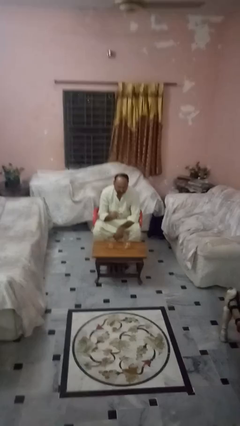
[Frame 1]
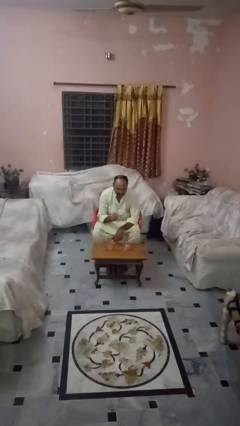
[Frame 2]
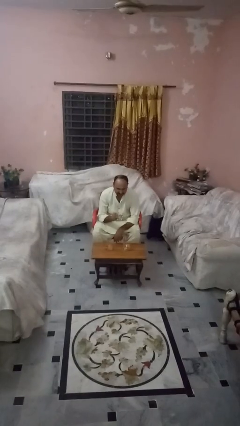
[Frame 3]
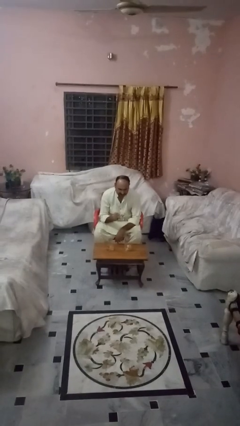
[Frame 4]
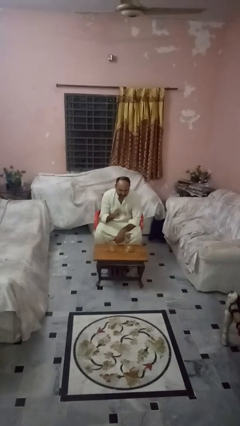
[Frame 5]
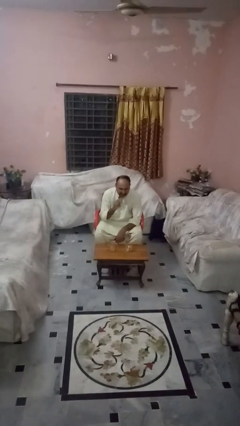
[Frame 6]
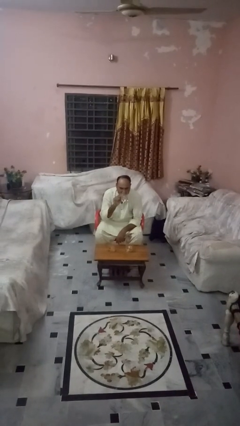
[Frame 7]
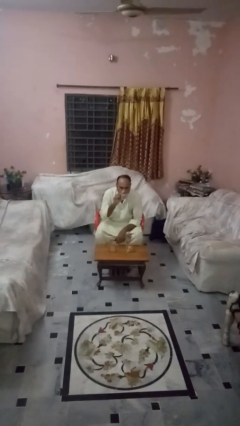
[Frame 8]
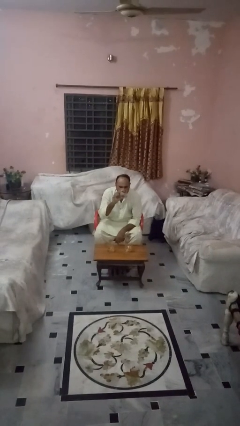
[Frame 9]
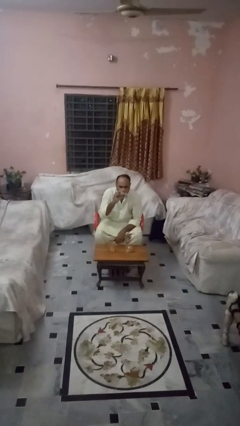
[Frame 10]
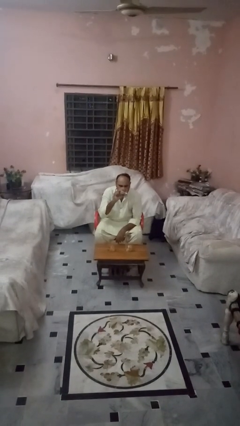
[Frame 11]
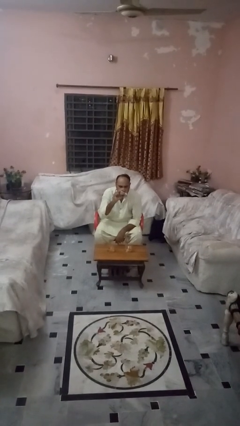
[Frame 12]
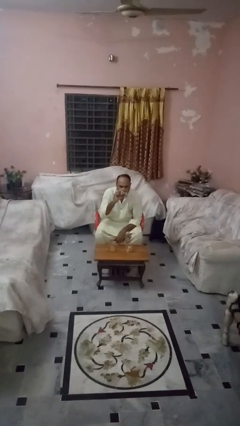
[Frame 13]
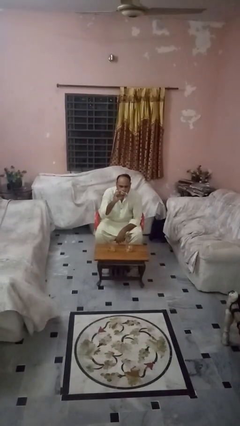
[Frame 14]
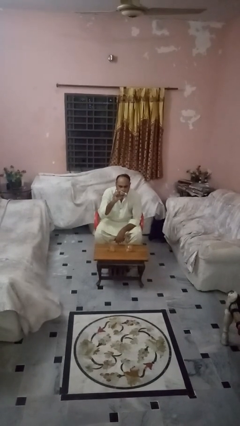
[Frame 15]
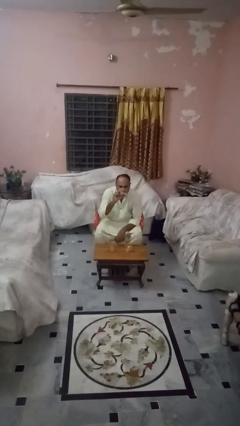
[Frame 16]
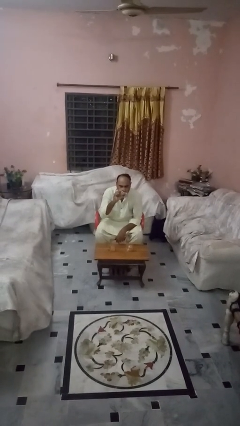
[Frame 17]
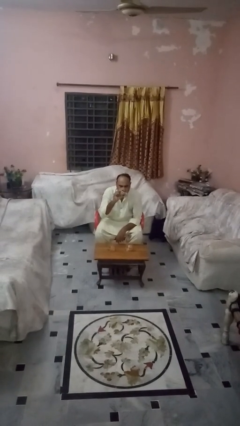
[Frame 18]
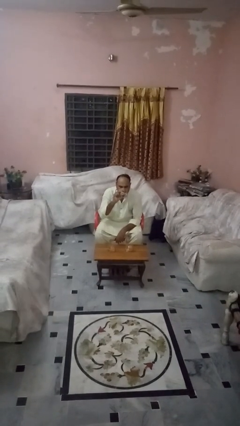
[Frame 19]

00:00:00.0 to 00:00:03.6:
person drinks from shotglass

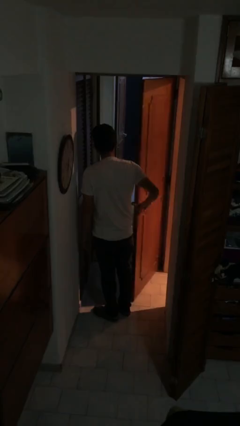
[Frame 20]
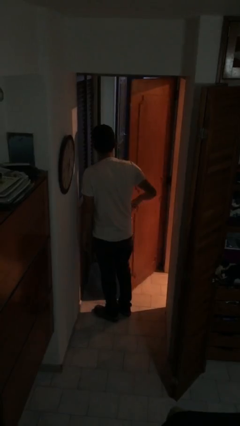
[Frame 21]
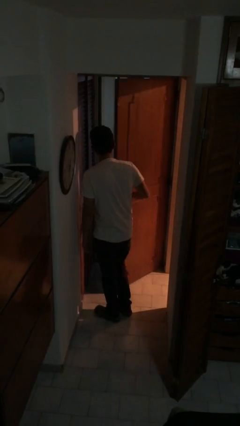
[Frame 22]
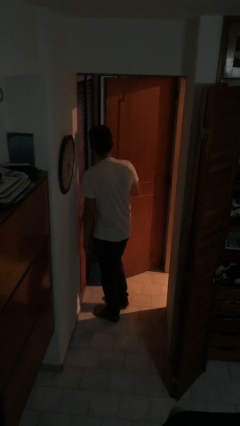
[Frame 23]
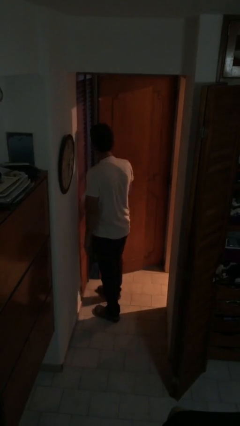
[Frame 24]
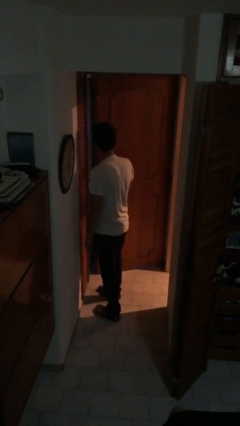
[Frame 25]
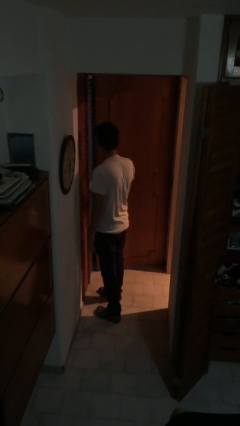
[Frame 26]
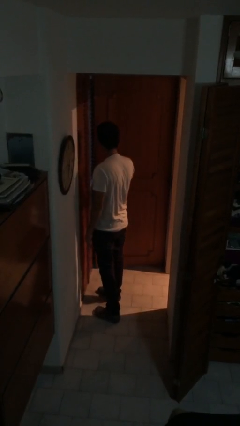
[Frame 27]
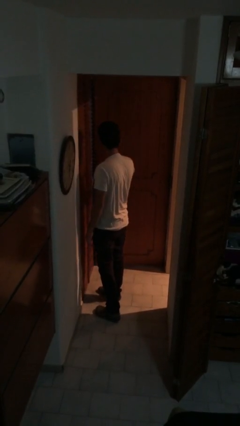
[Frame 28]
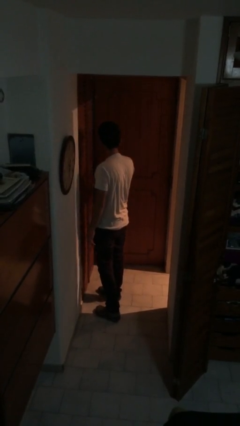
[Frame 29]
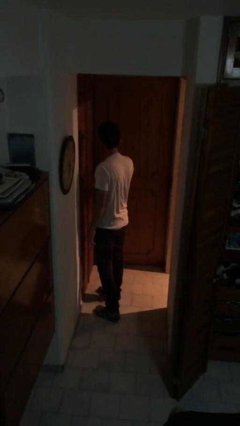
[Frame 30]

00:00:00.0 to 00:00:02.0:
person closes facility door

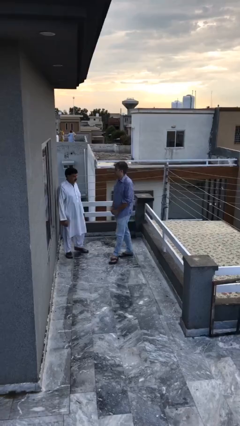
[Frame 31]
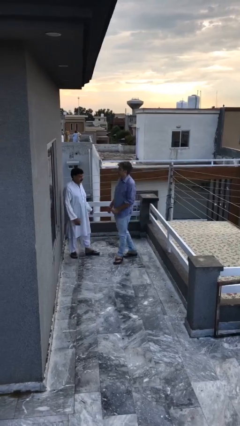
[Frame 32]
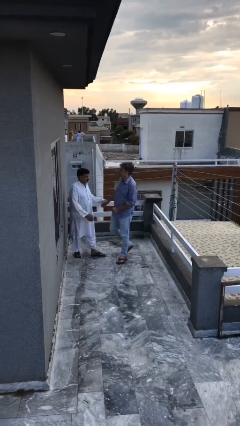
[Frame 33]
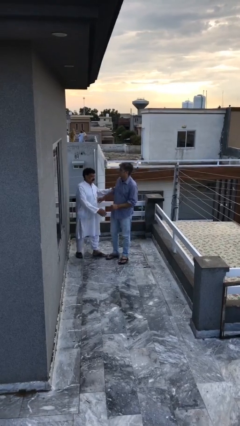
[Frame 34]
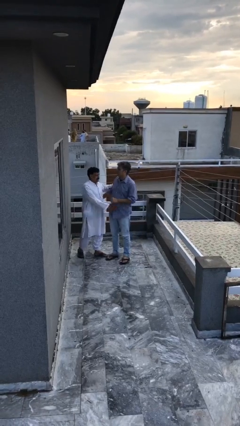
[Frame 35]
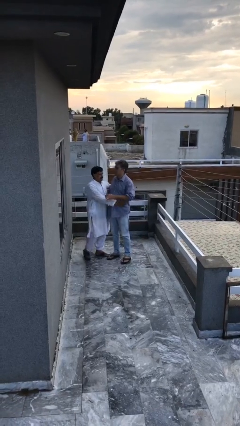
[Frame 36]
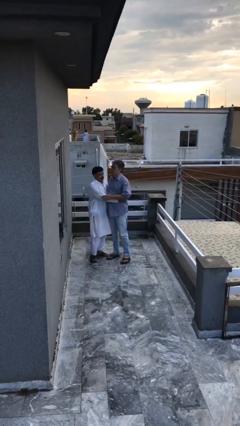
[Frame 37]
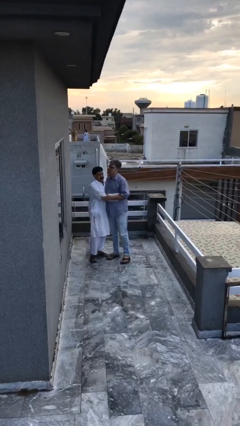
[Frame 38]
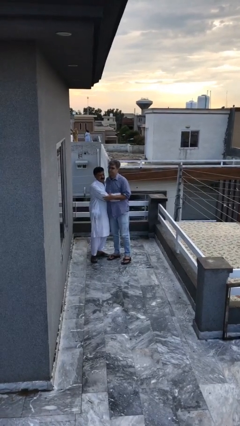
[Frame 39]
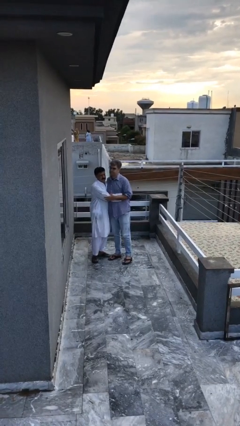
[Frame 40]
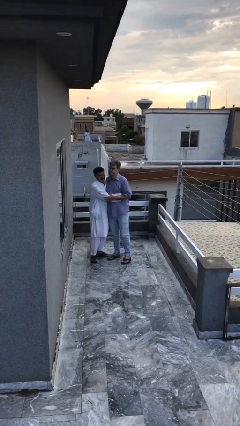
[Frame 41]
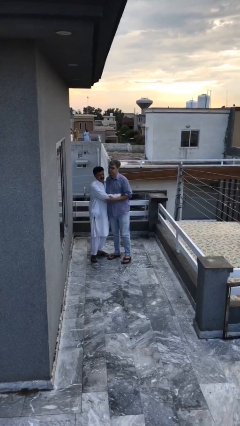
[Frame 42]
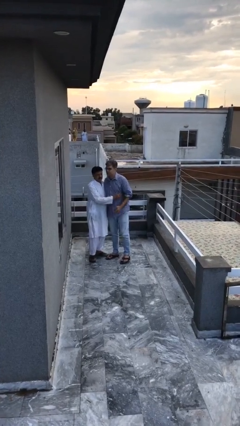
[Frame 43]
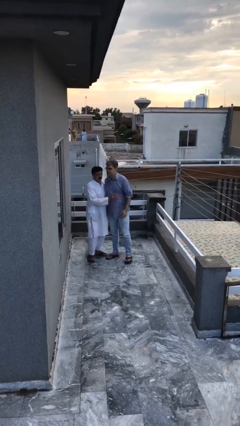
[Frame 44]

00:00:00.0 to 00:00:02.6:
person embraces person

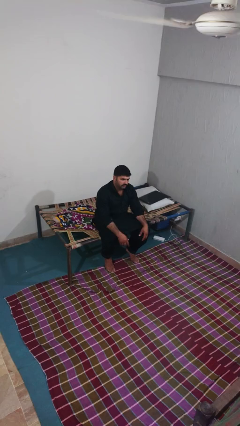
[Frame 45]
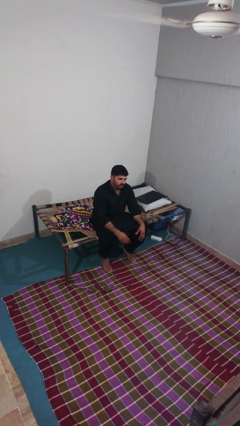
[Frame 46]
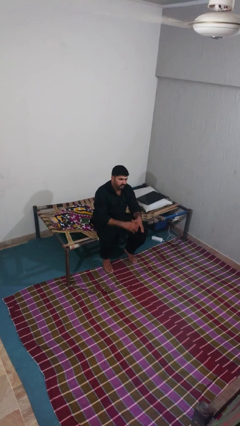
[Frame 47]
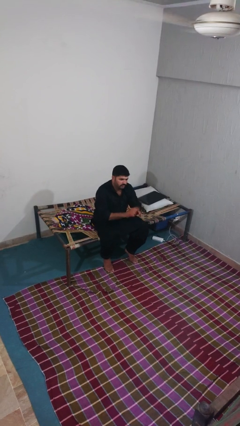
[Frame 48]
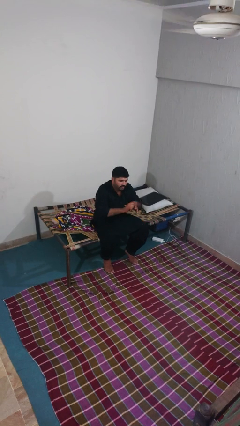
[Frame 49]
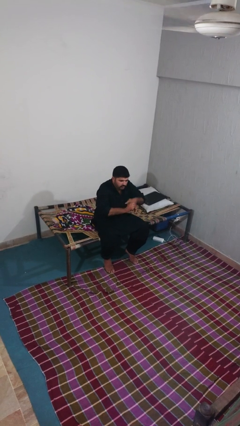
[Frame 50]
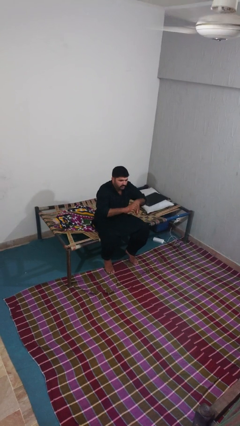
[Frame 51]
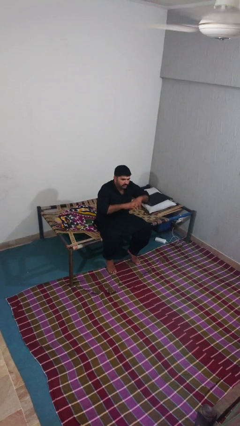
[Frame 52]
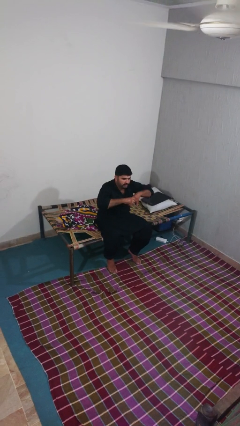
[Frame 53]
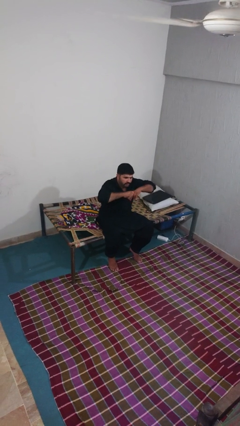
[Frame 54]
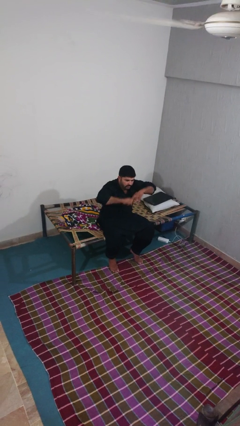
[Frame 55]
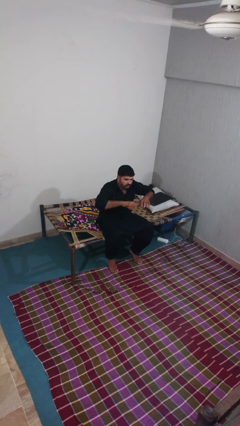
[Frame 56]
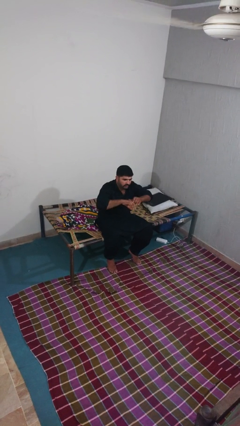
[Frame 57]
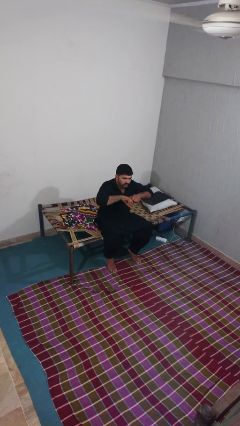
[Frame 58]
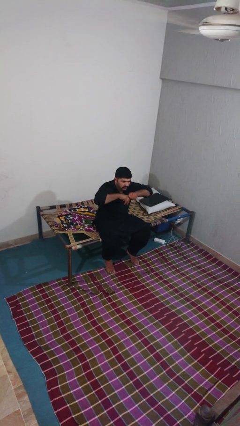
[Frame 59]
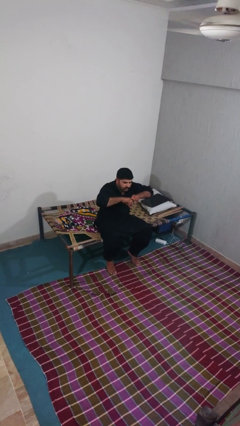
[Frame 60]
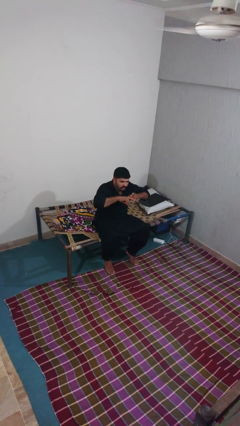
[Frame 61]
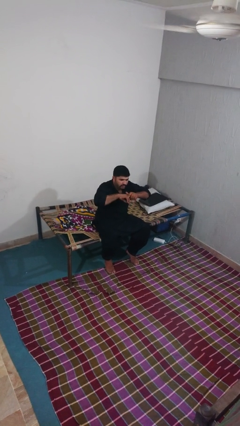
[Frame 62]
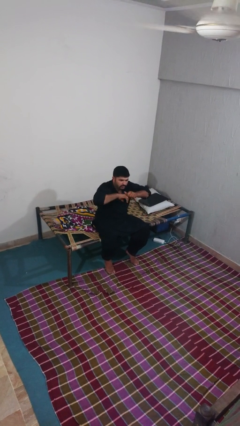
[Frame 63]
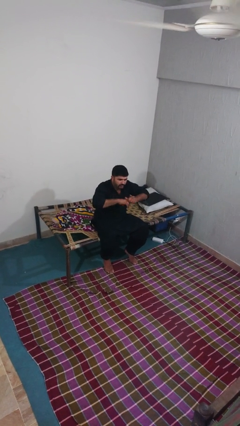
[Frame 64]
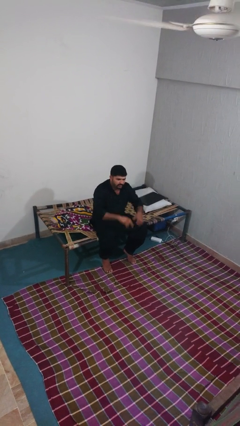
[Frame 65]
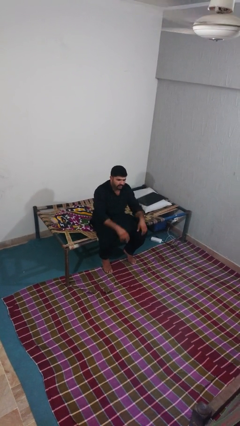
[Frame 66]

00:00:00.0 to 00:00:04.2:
person cracks knuckles

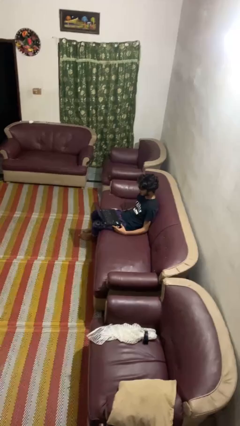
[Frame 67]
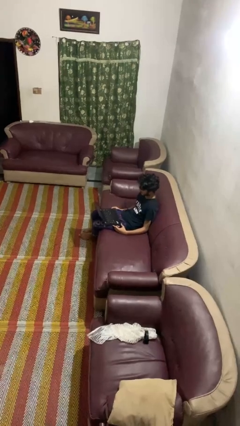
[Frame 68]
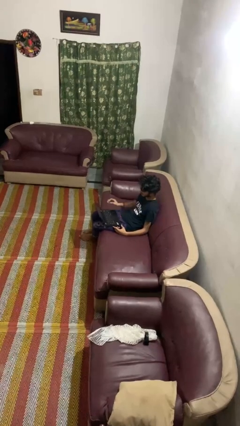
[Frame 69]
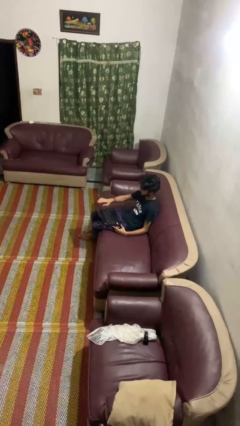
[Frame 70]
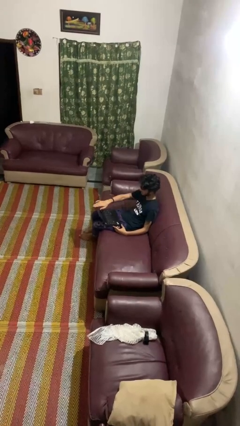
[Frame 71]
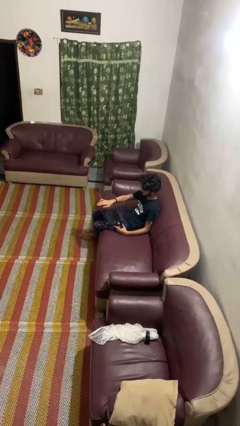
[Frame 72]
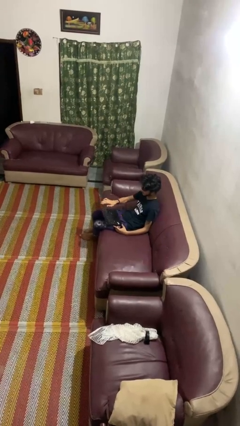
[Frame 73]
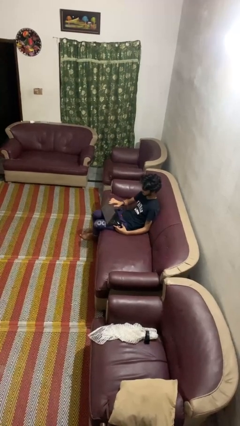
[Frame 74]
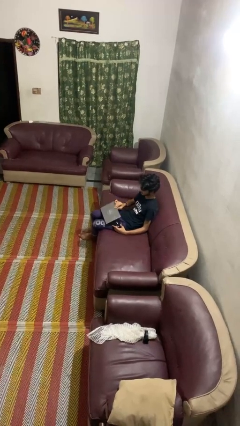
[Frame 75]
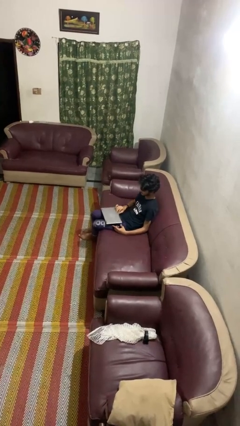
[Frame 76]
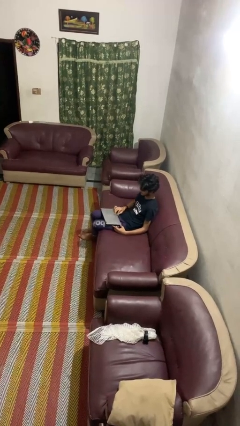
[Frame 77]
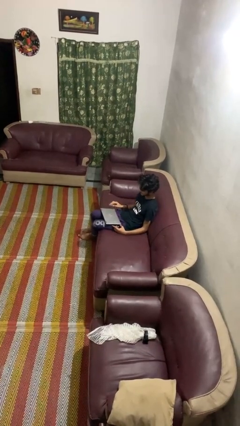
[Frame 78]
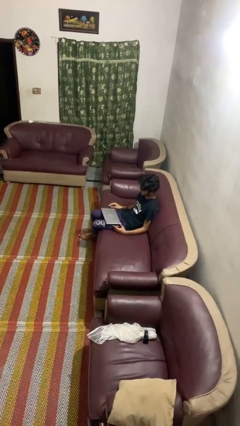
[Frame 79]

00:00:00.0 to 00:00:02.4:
person closes laptop

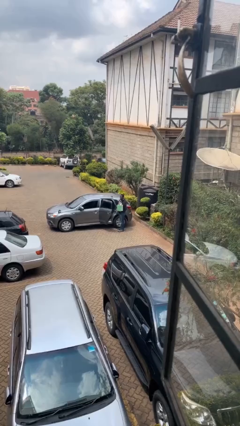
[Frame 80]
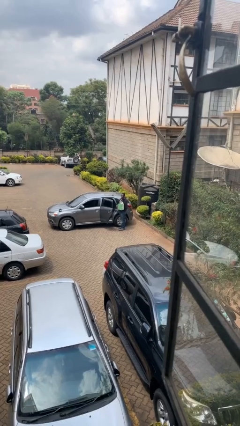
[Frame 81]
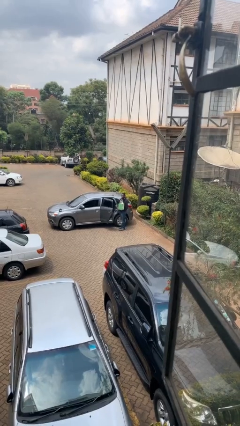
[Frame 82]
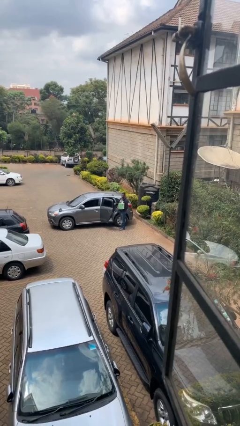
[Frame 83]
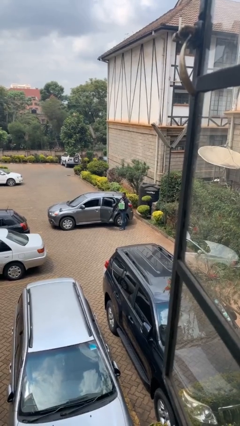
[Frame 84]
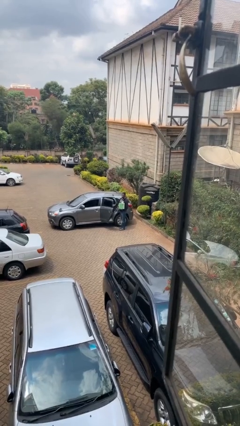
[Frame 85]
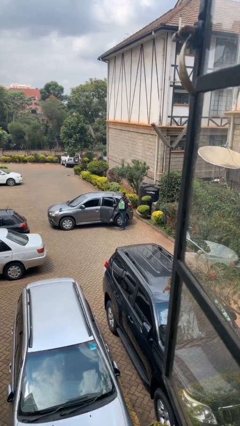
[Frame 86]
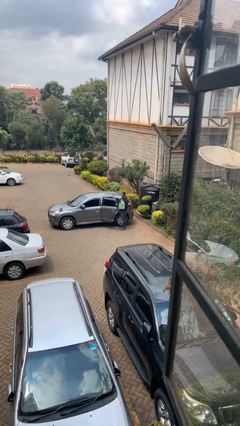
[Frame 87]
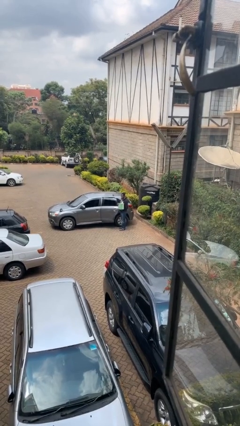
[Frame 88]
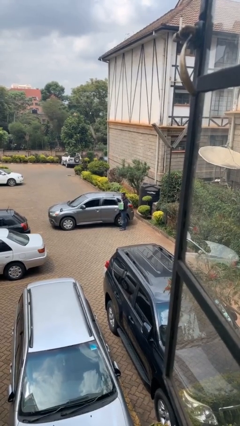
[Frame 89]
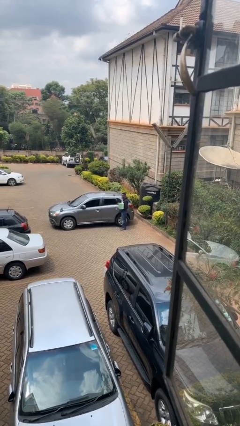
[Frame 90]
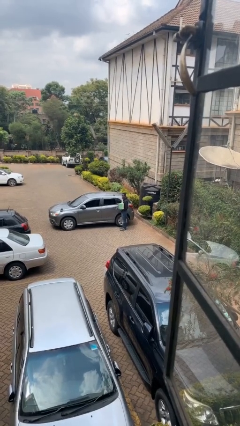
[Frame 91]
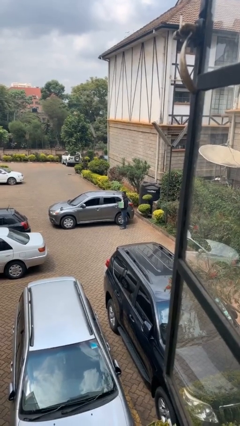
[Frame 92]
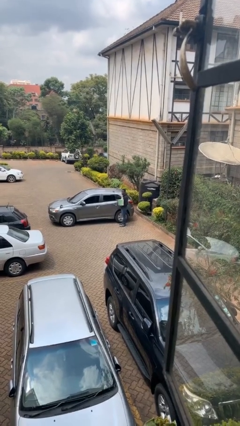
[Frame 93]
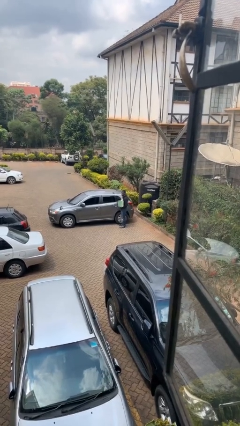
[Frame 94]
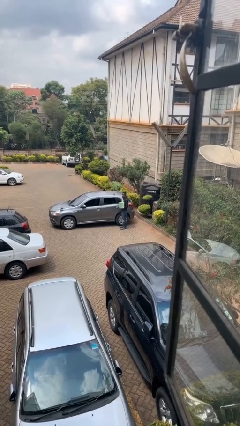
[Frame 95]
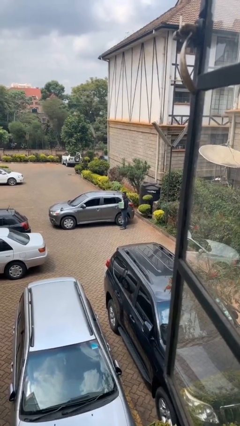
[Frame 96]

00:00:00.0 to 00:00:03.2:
person closes car door
